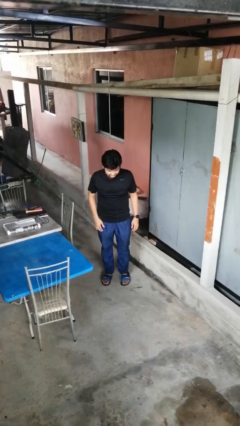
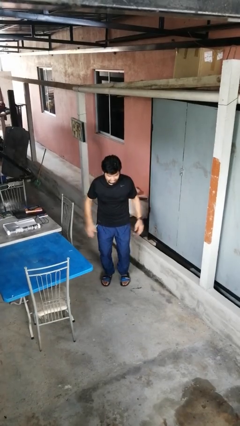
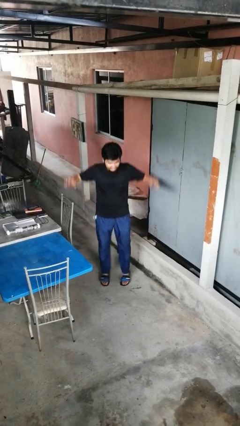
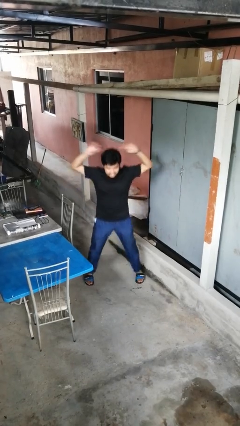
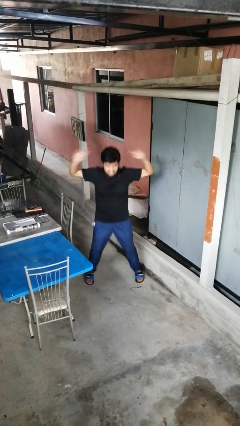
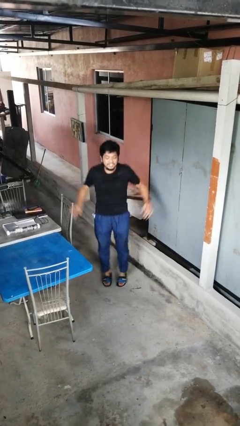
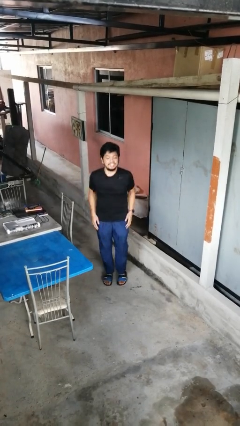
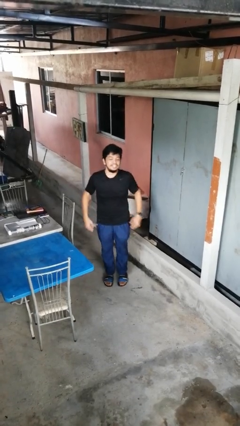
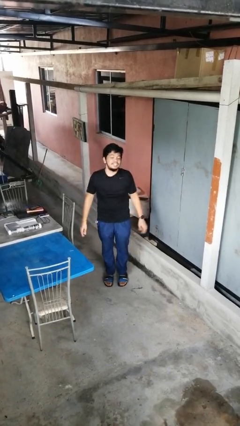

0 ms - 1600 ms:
person exercises with jumping jacks

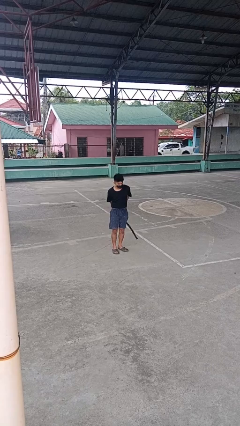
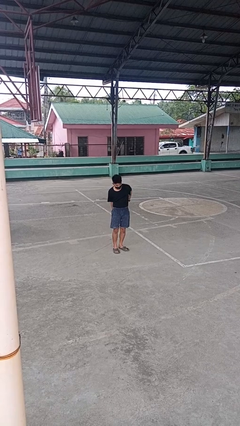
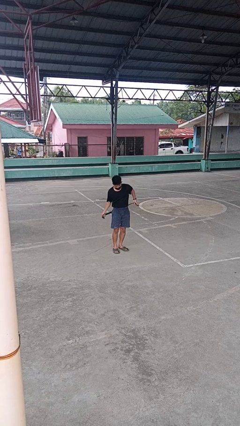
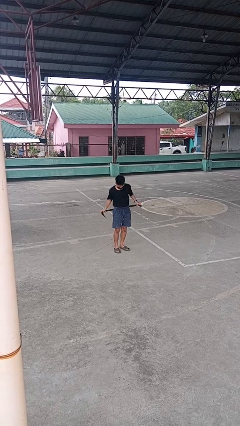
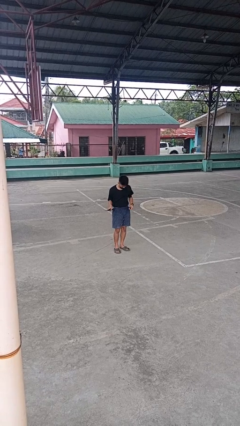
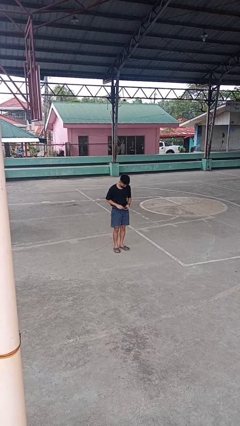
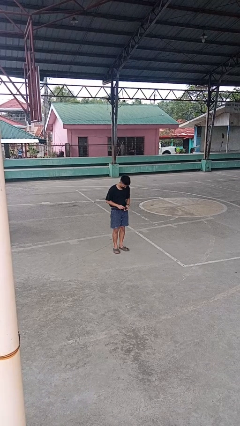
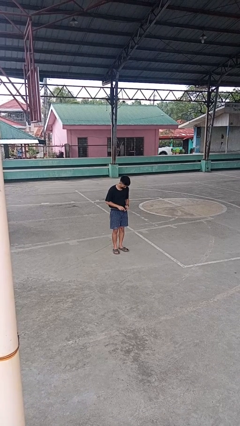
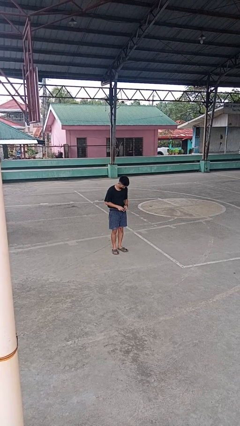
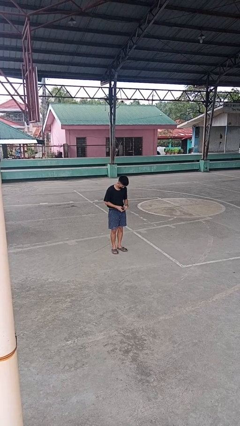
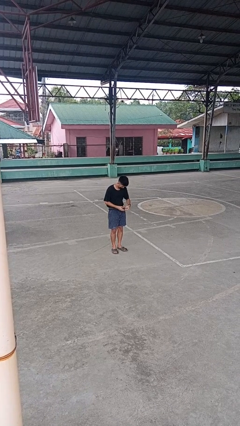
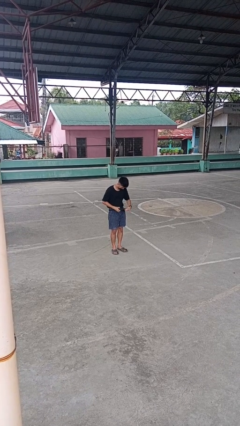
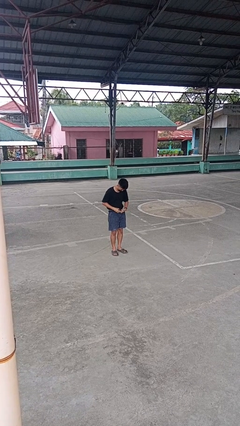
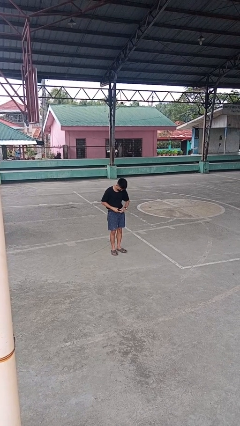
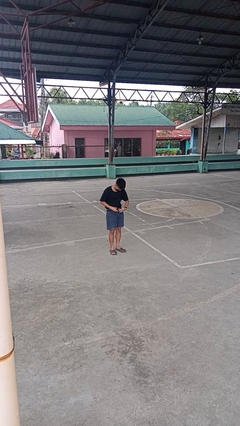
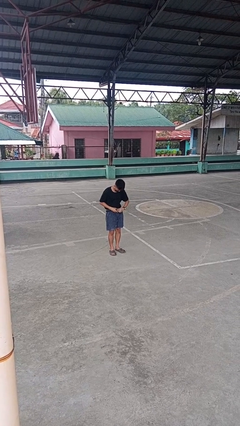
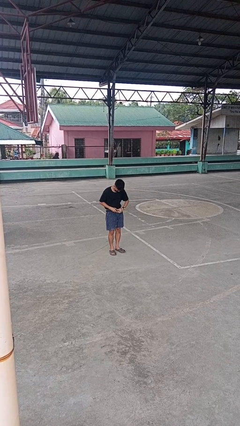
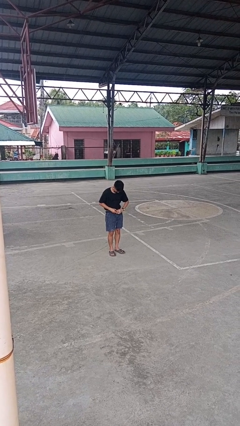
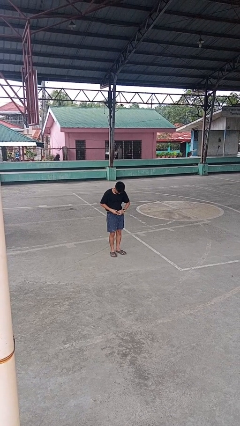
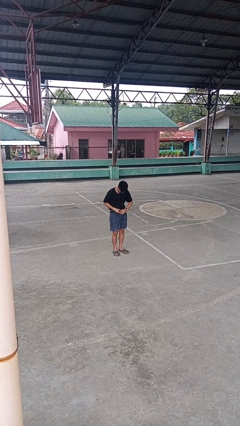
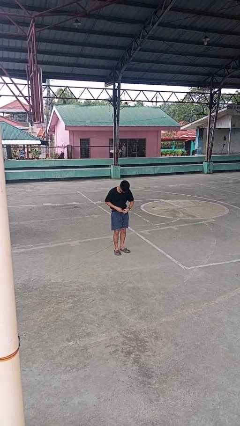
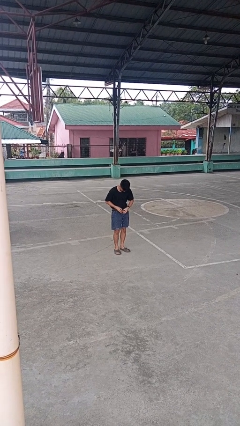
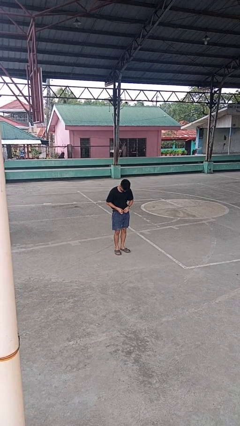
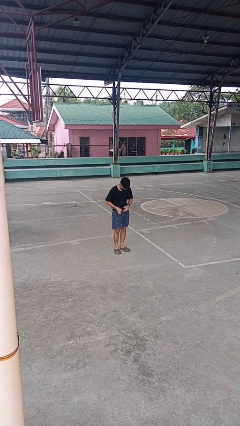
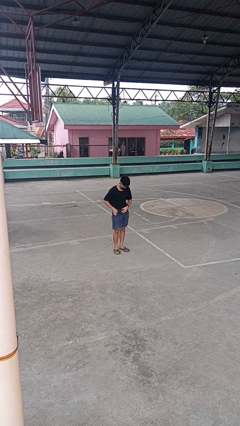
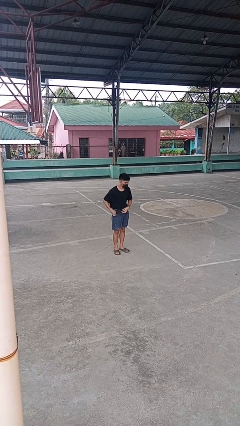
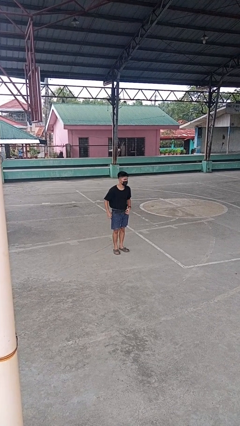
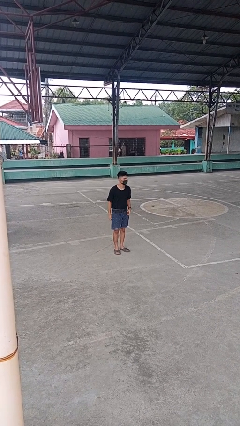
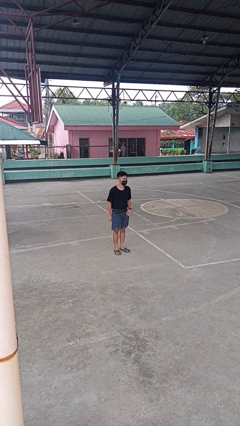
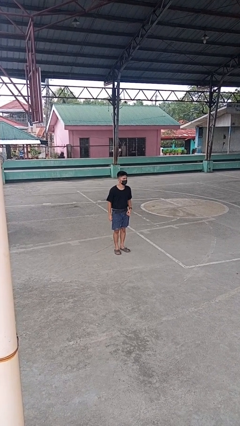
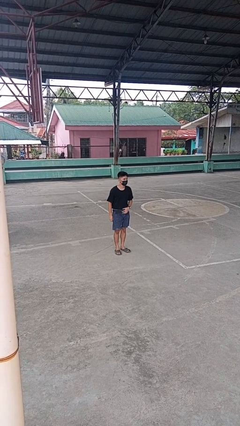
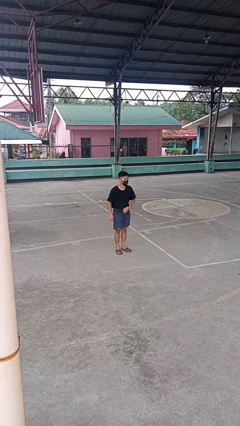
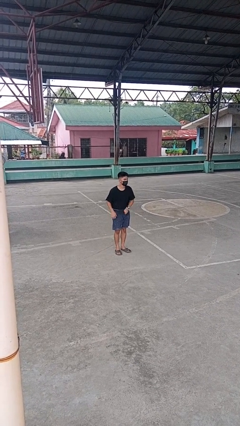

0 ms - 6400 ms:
person puts on belt

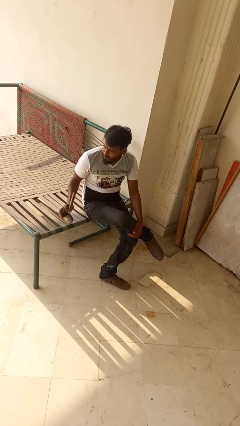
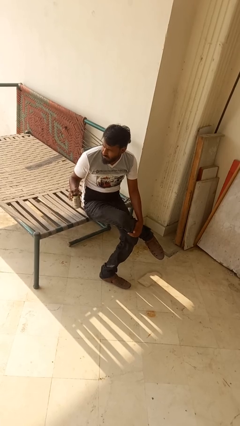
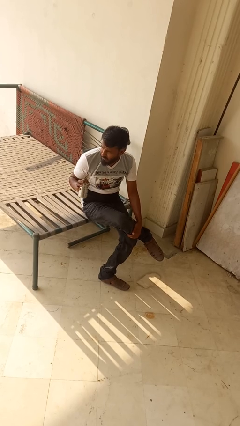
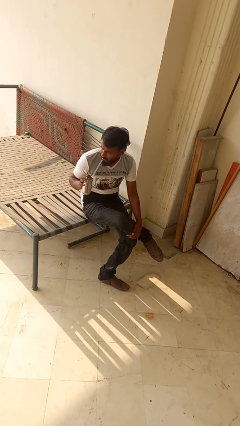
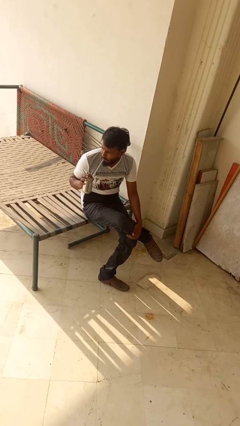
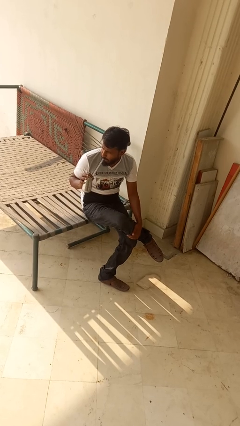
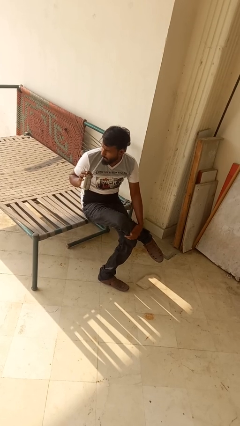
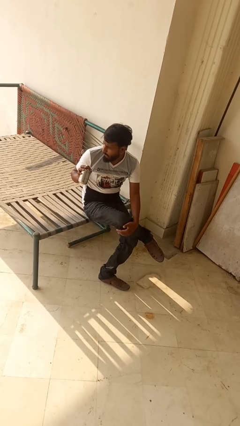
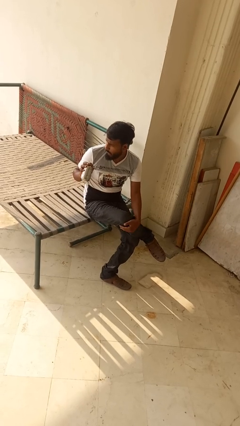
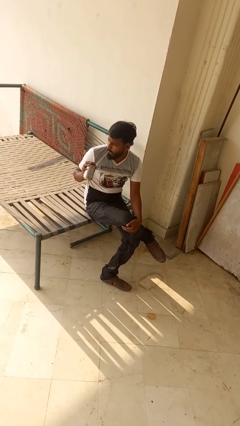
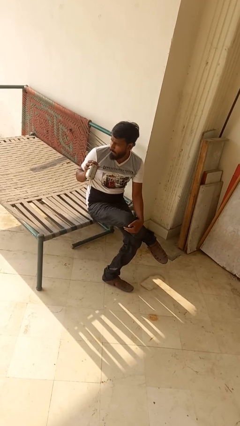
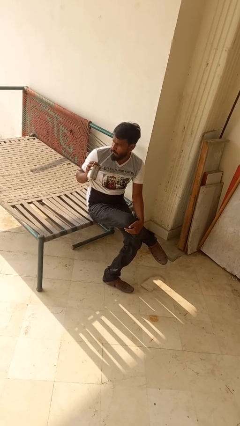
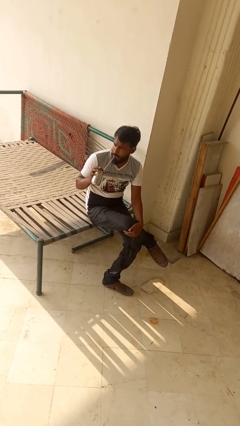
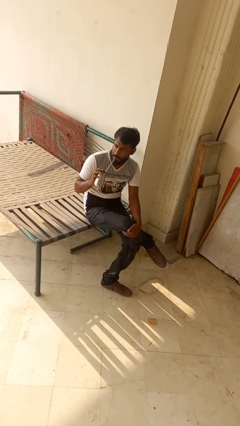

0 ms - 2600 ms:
person drinks from straw

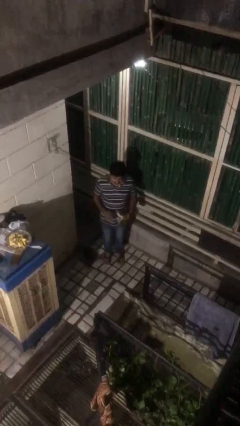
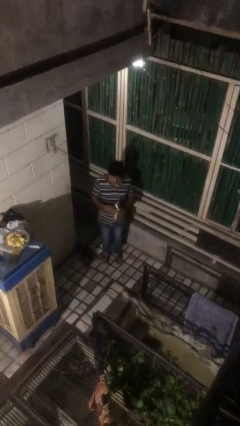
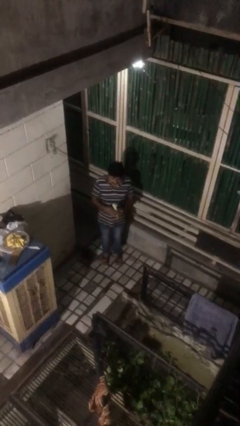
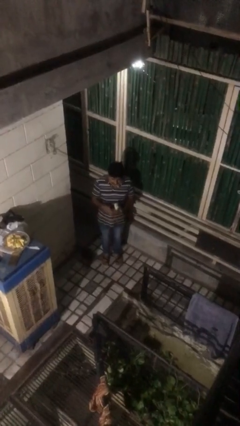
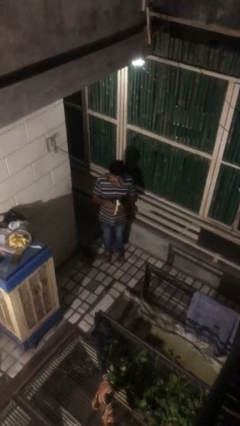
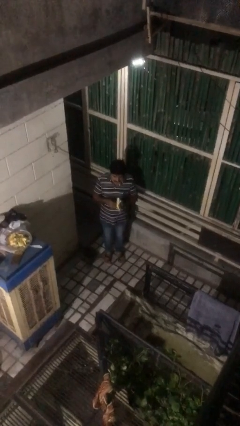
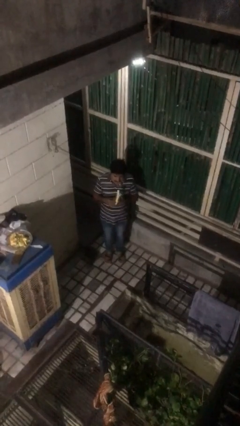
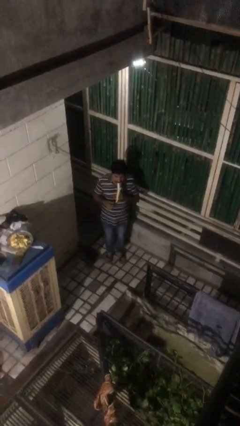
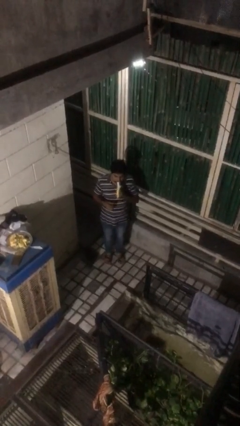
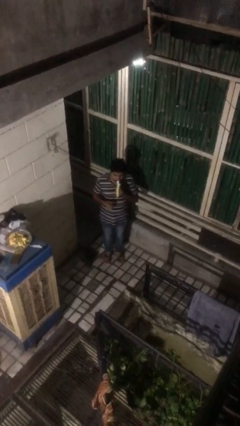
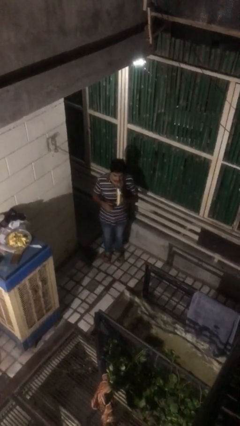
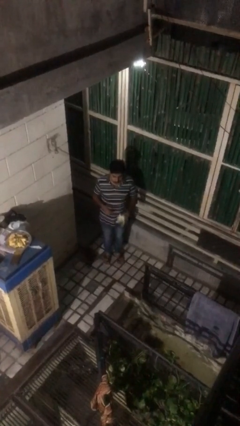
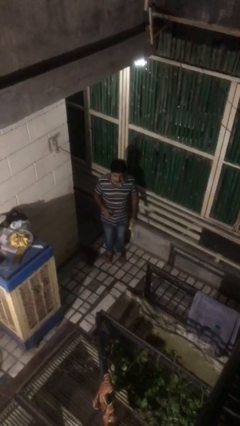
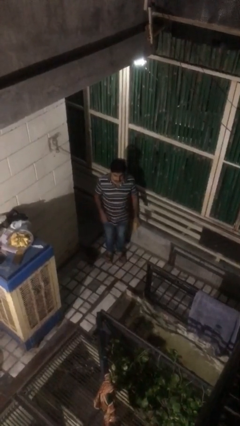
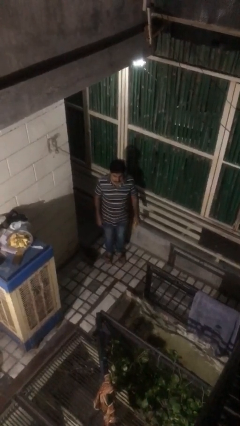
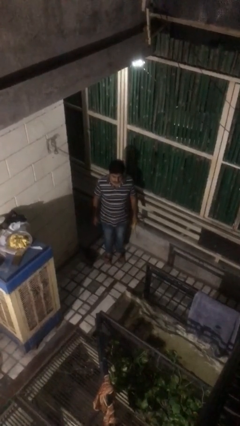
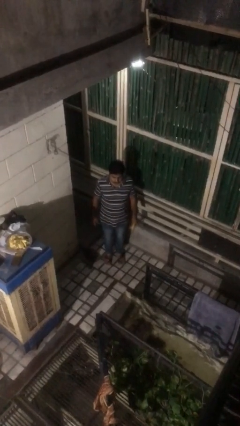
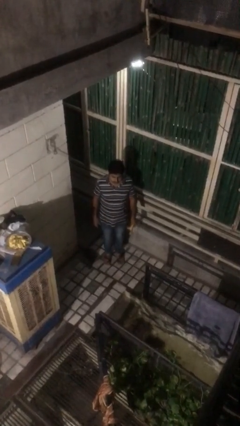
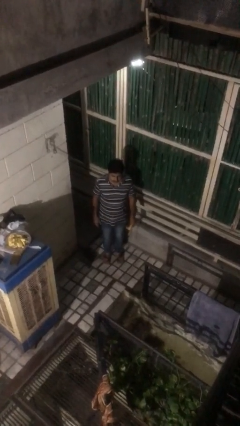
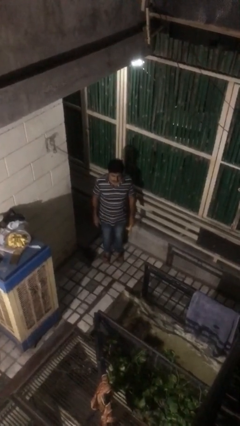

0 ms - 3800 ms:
person eats banana

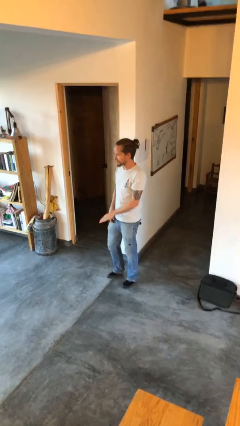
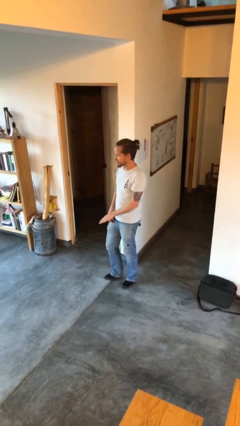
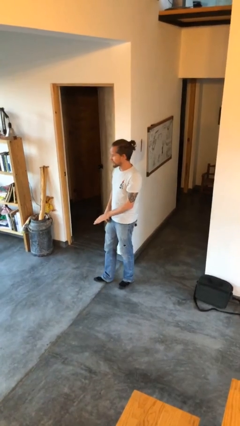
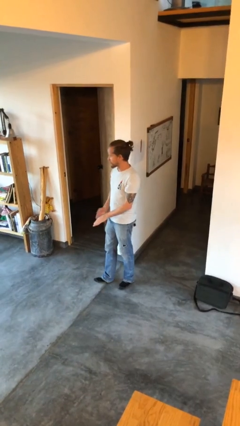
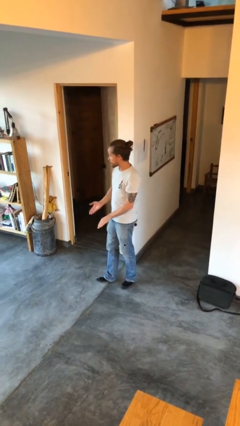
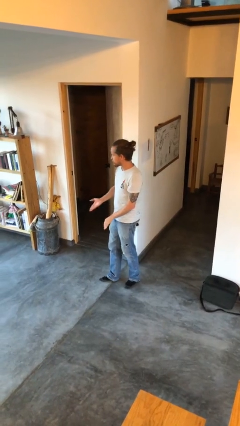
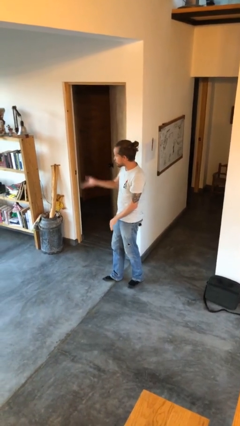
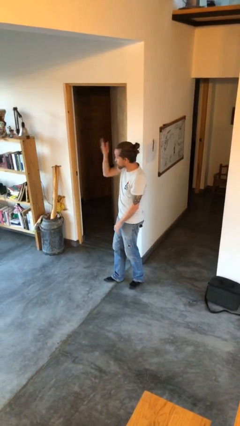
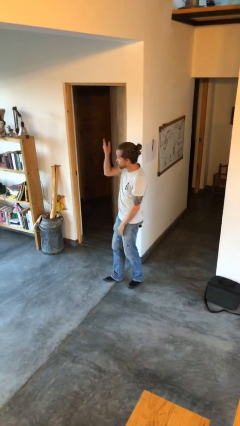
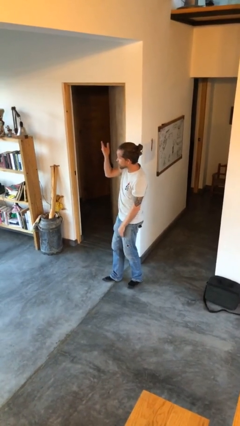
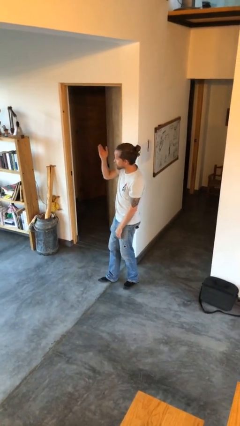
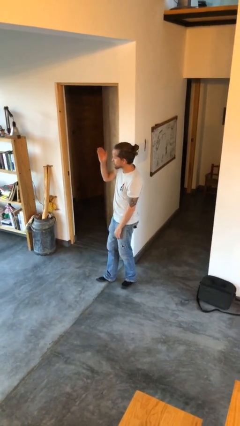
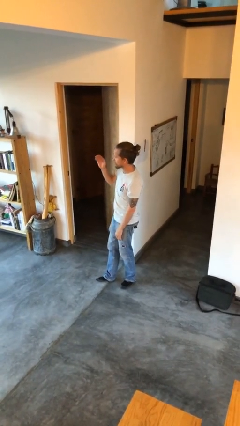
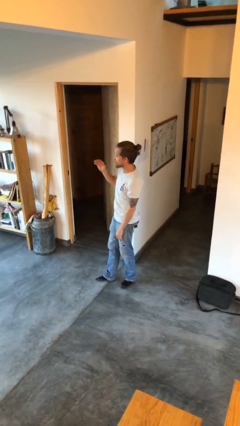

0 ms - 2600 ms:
person gestures swipe up
